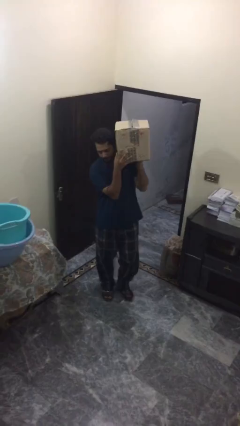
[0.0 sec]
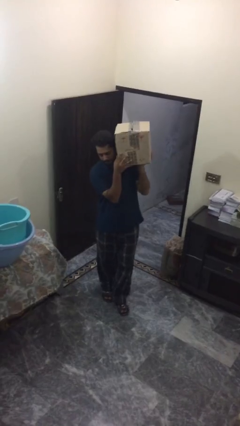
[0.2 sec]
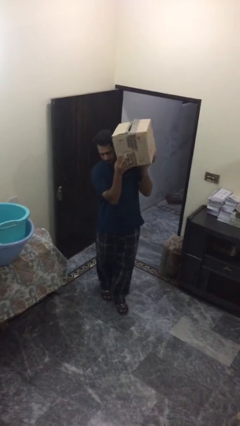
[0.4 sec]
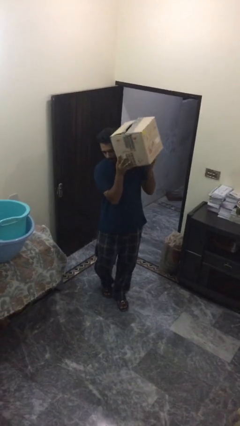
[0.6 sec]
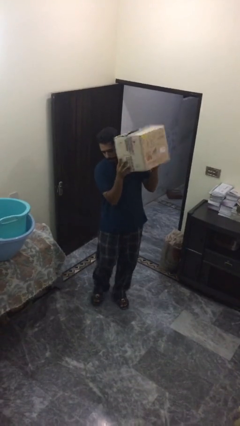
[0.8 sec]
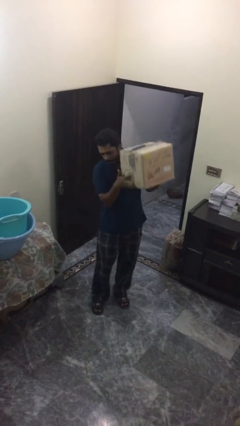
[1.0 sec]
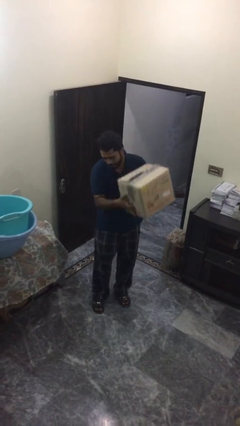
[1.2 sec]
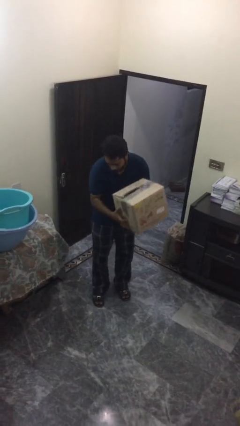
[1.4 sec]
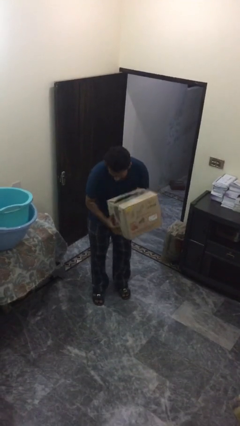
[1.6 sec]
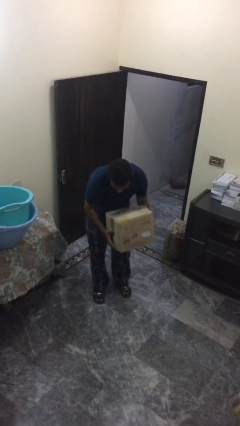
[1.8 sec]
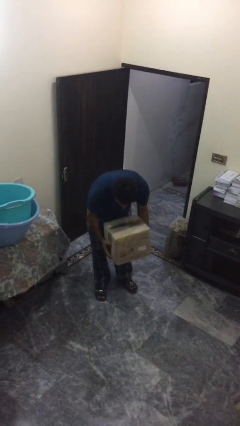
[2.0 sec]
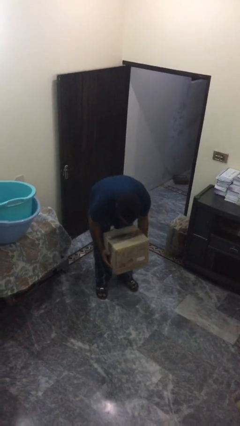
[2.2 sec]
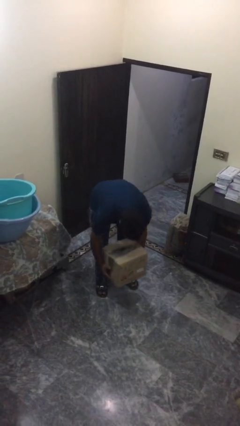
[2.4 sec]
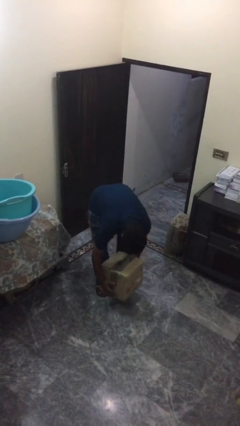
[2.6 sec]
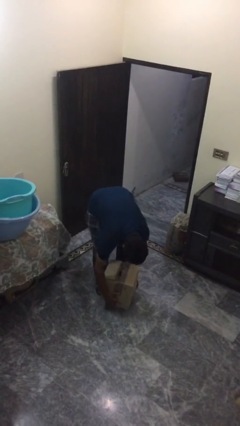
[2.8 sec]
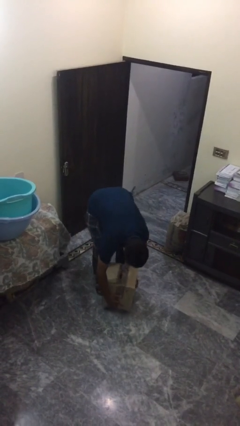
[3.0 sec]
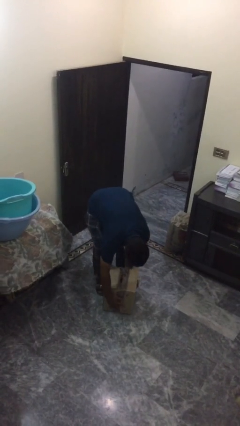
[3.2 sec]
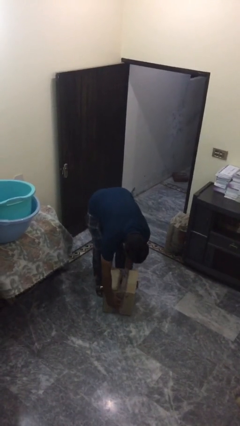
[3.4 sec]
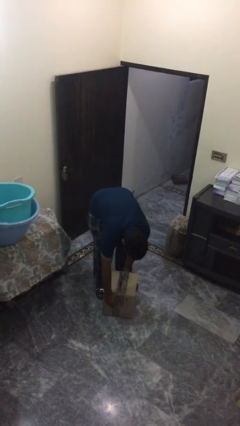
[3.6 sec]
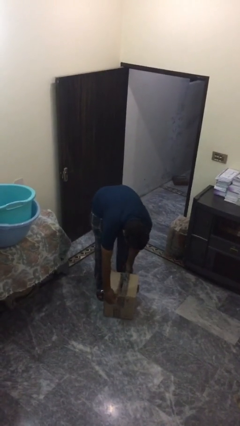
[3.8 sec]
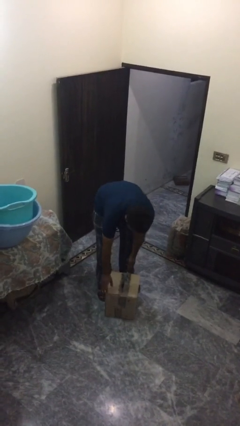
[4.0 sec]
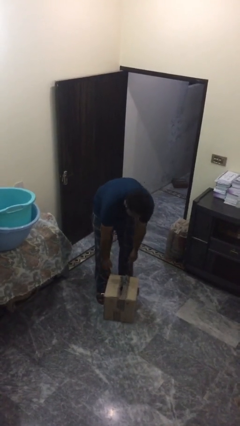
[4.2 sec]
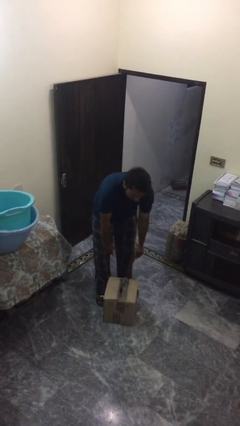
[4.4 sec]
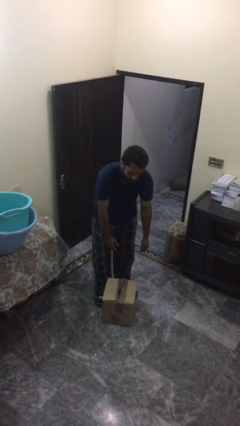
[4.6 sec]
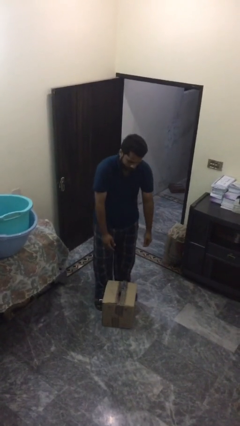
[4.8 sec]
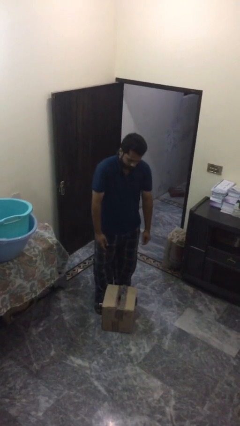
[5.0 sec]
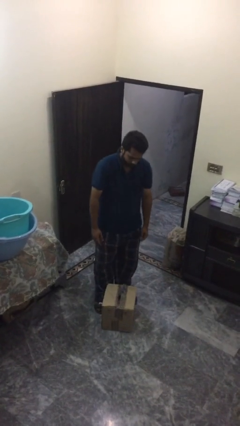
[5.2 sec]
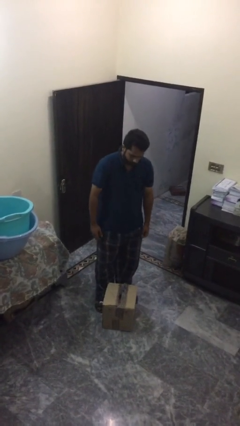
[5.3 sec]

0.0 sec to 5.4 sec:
person puts down object on floor

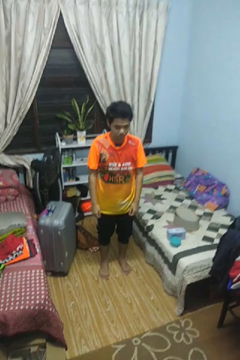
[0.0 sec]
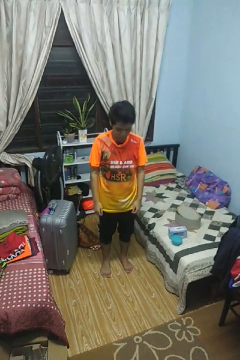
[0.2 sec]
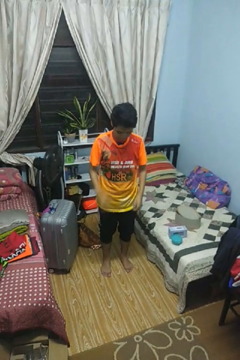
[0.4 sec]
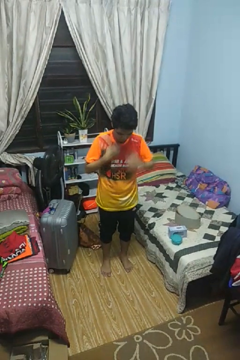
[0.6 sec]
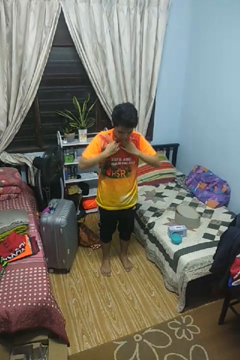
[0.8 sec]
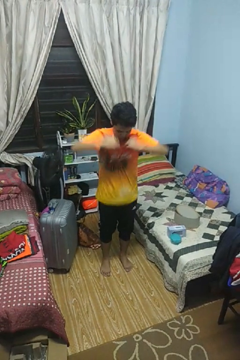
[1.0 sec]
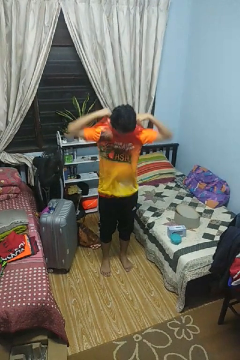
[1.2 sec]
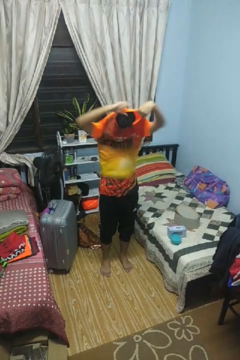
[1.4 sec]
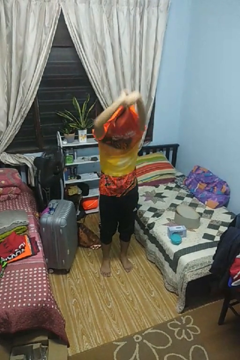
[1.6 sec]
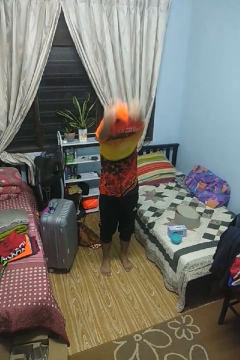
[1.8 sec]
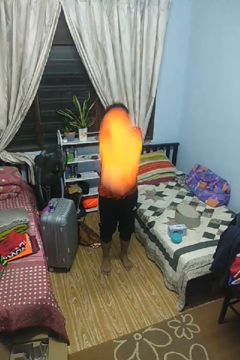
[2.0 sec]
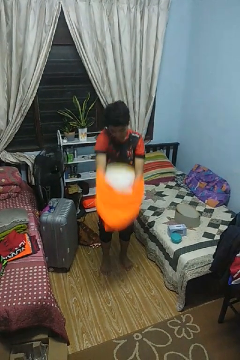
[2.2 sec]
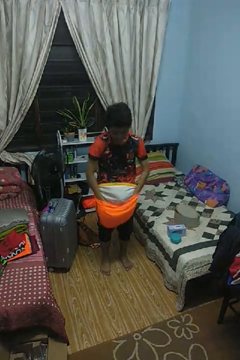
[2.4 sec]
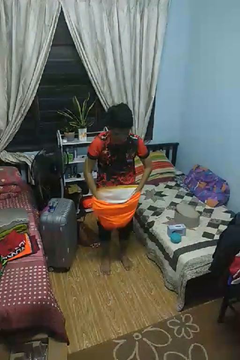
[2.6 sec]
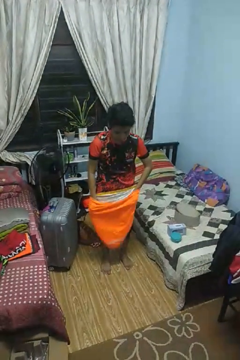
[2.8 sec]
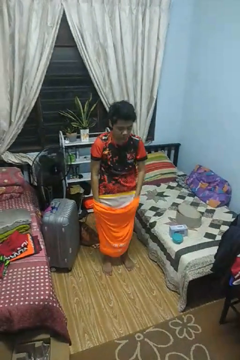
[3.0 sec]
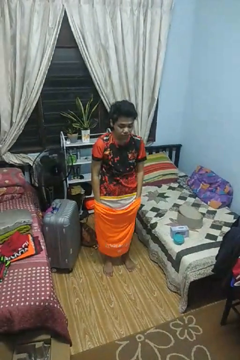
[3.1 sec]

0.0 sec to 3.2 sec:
person takes off shirt

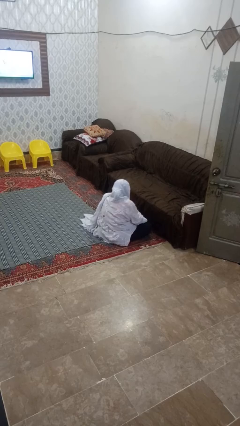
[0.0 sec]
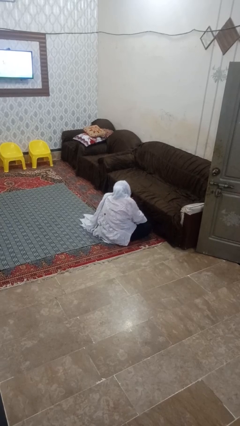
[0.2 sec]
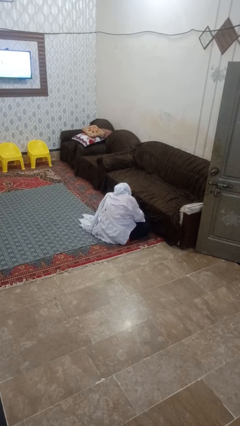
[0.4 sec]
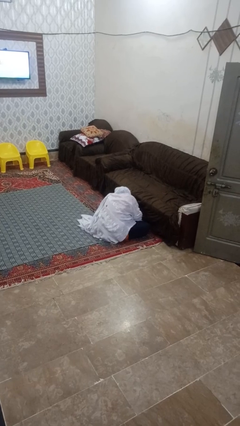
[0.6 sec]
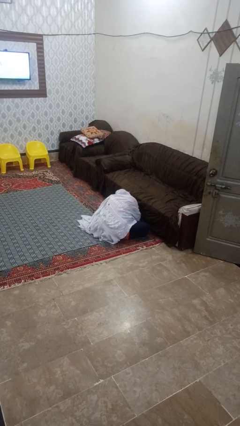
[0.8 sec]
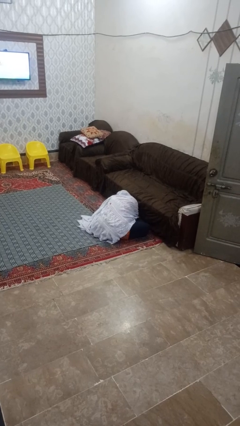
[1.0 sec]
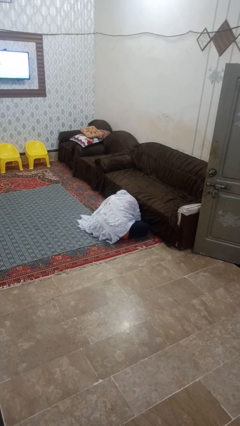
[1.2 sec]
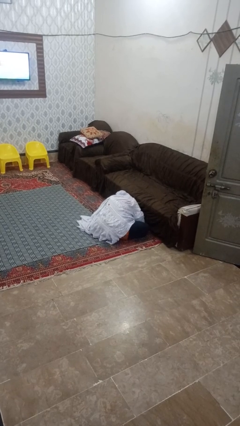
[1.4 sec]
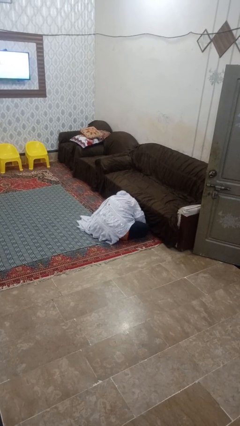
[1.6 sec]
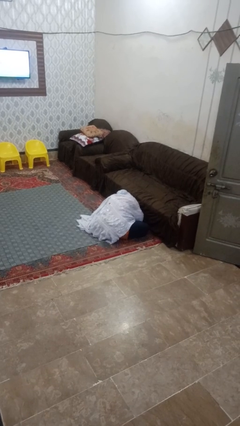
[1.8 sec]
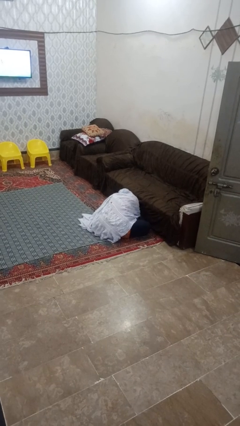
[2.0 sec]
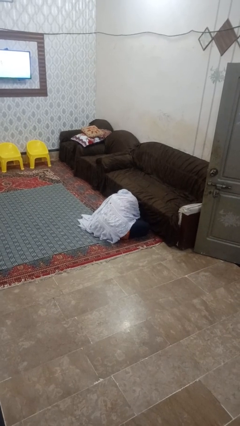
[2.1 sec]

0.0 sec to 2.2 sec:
person searches under couch

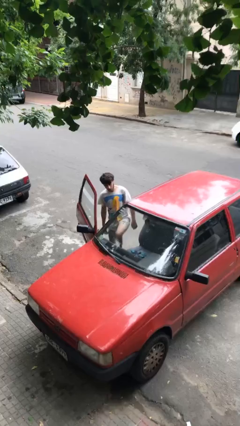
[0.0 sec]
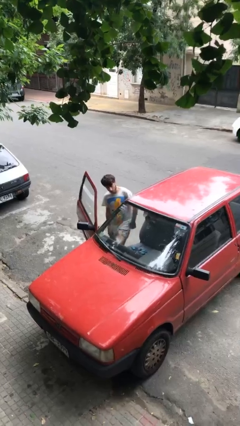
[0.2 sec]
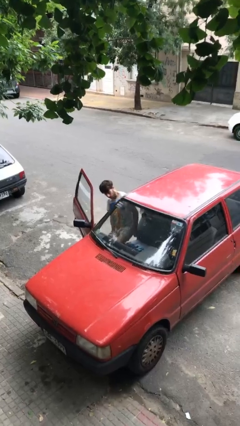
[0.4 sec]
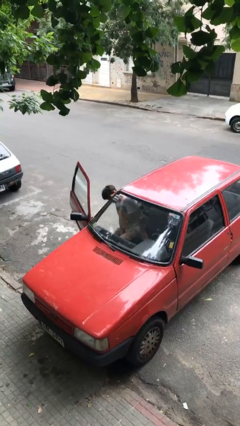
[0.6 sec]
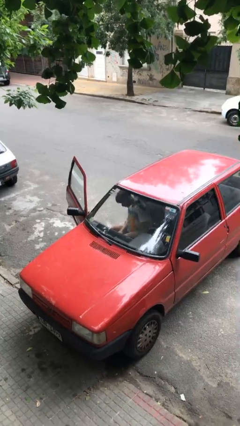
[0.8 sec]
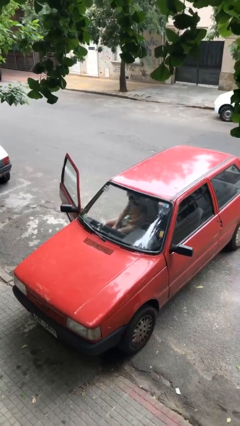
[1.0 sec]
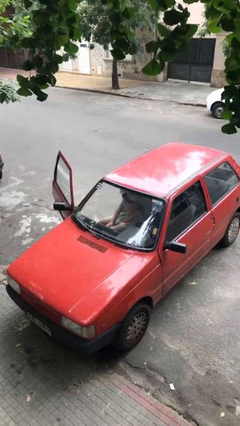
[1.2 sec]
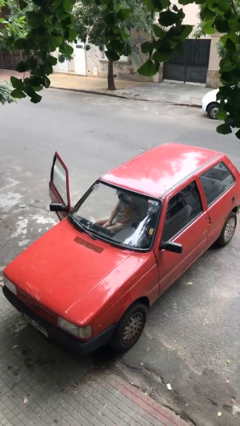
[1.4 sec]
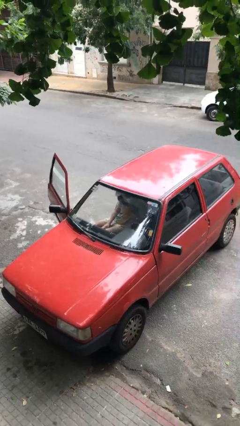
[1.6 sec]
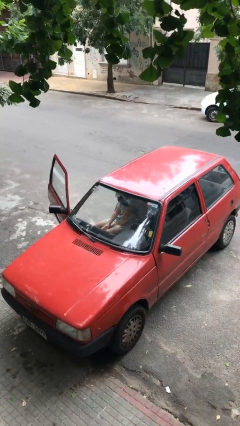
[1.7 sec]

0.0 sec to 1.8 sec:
person enters car

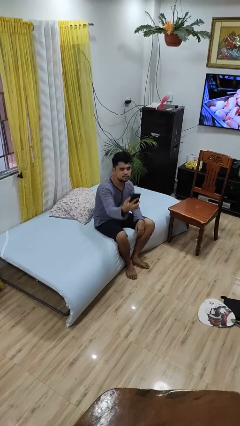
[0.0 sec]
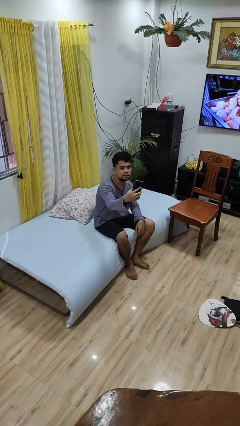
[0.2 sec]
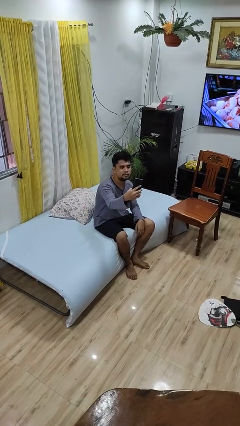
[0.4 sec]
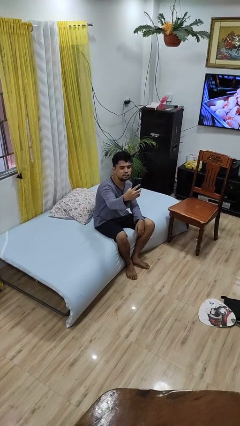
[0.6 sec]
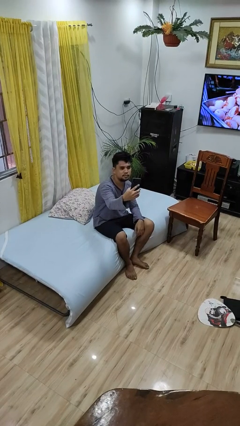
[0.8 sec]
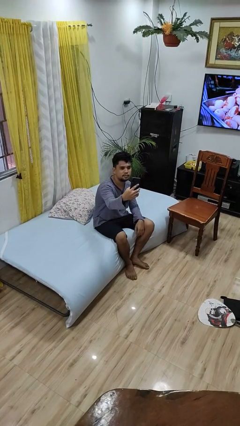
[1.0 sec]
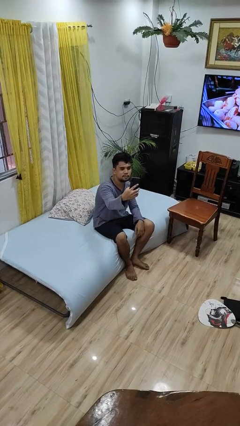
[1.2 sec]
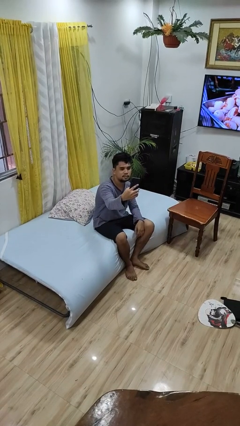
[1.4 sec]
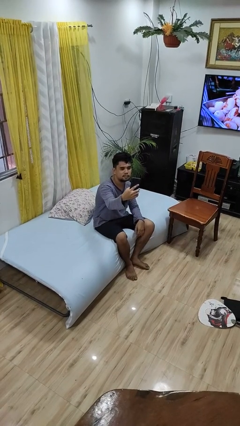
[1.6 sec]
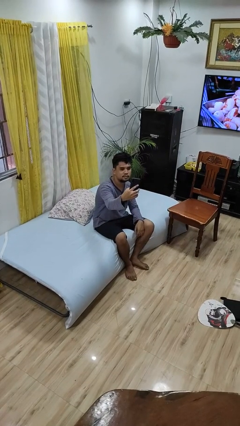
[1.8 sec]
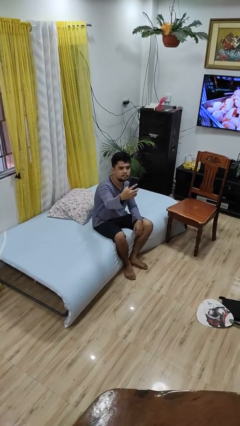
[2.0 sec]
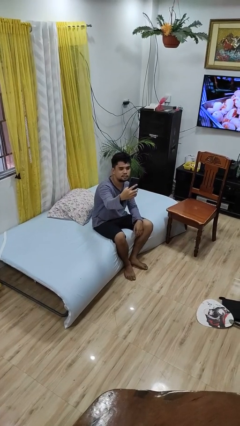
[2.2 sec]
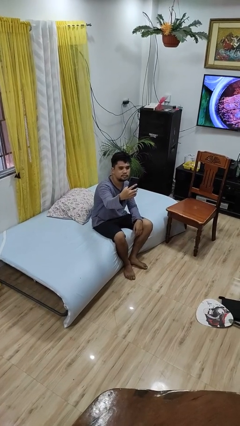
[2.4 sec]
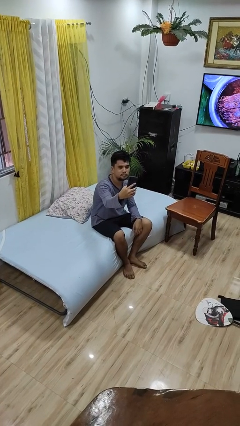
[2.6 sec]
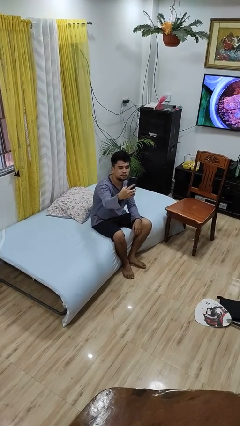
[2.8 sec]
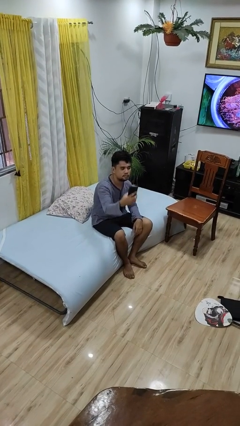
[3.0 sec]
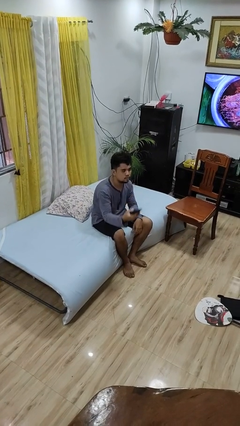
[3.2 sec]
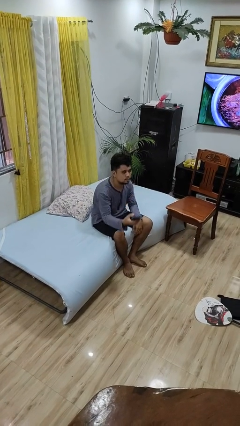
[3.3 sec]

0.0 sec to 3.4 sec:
person takes selfie

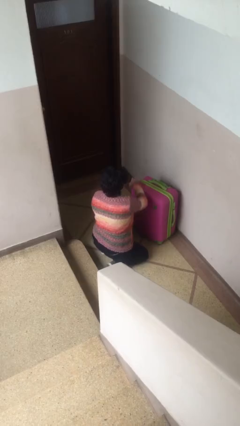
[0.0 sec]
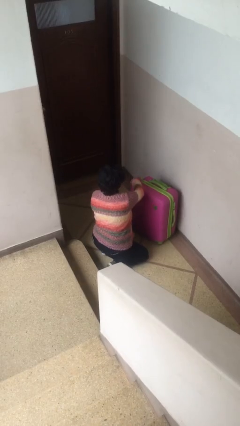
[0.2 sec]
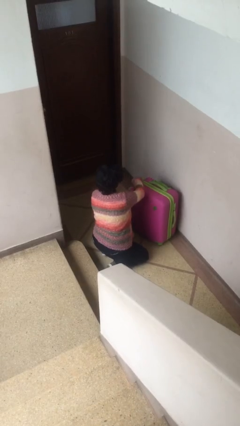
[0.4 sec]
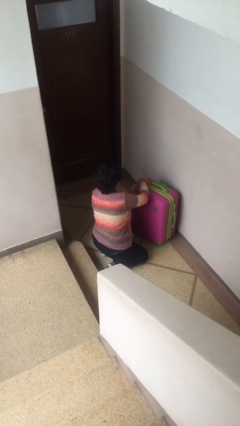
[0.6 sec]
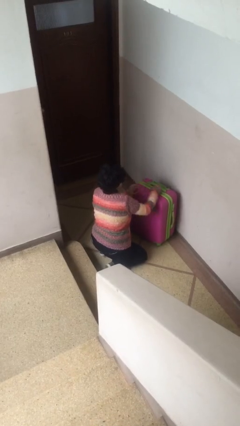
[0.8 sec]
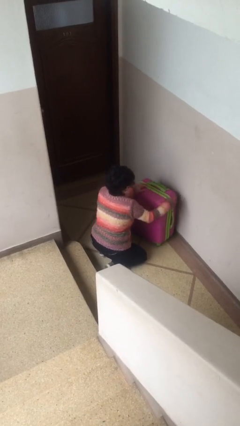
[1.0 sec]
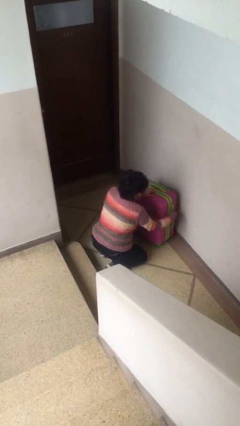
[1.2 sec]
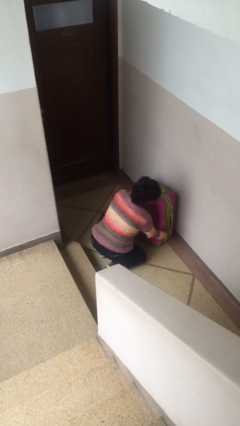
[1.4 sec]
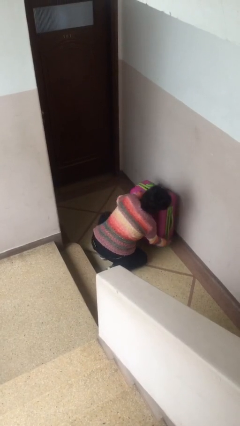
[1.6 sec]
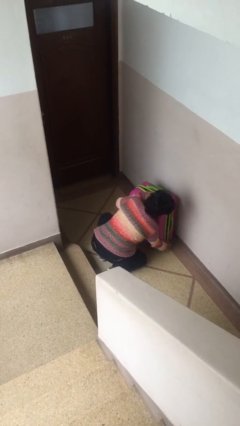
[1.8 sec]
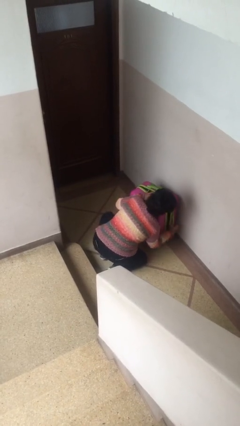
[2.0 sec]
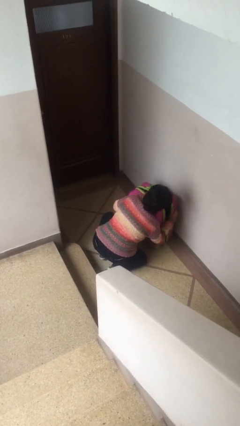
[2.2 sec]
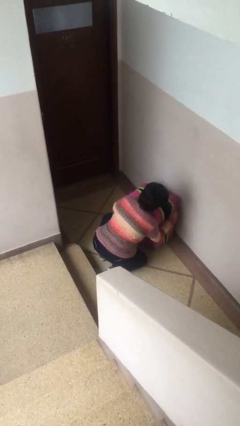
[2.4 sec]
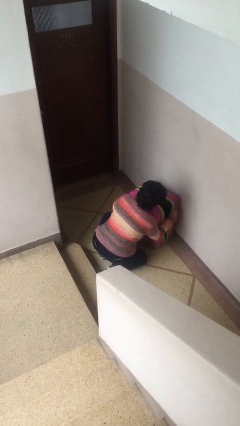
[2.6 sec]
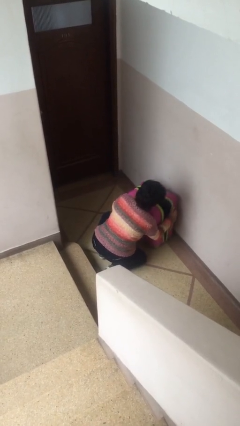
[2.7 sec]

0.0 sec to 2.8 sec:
person opens suitcase
